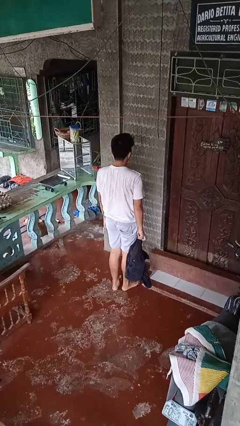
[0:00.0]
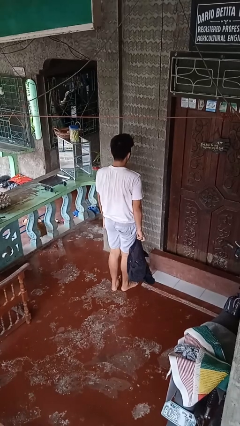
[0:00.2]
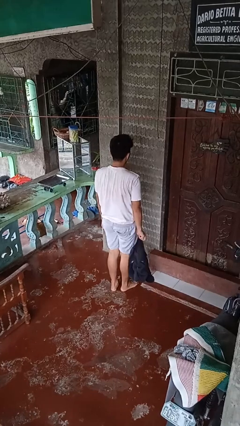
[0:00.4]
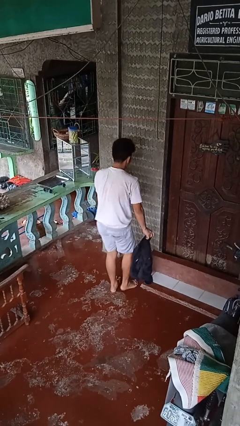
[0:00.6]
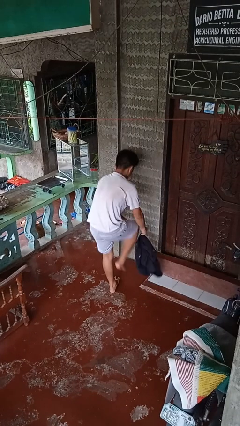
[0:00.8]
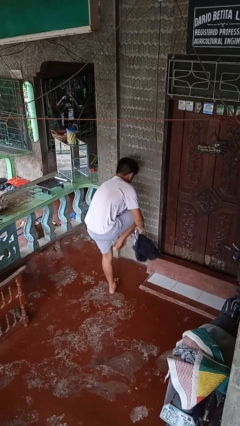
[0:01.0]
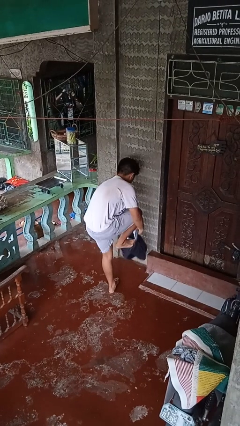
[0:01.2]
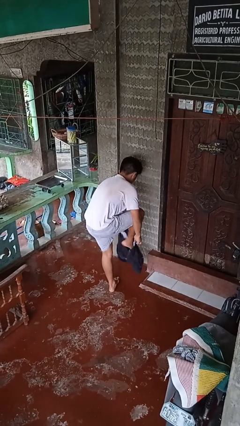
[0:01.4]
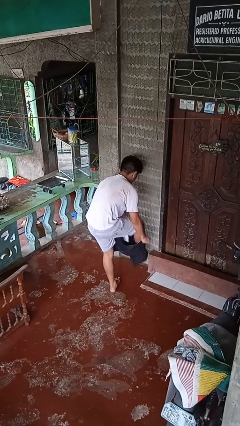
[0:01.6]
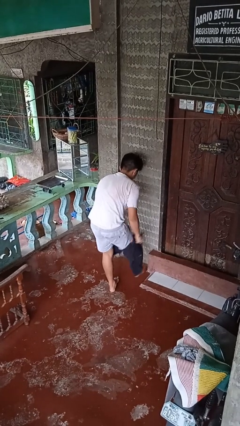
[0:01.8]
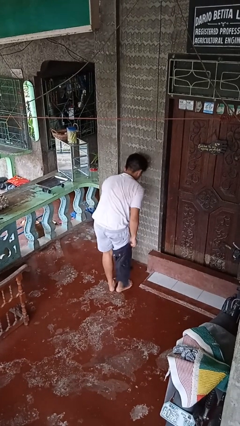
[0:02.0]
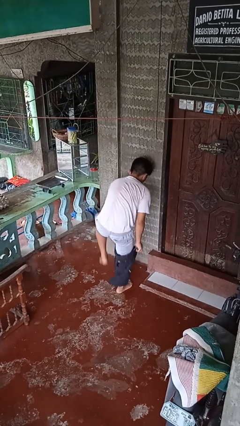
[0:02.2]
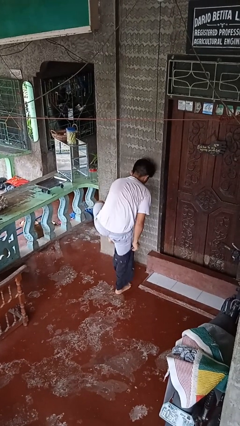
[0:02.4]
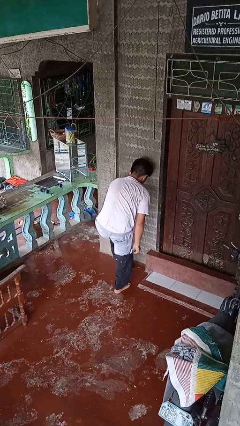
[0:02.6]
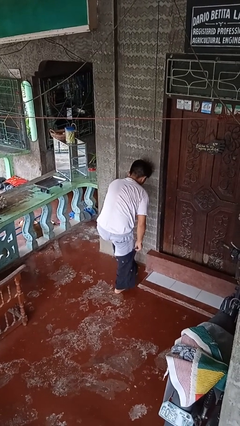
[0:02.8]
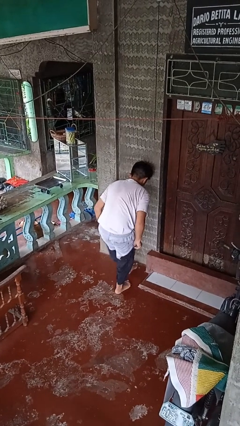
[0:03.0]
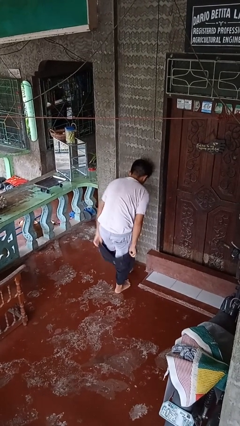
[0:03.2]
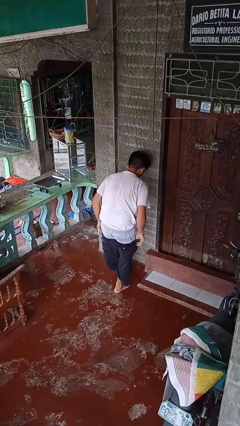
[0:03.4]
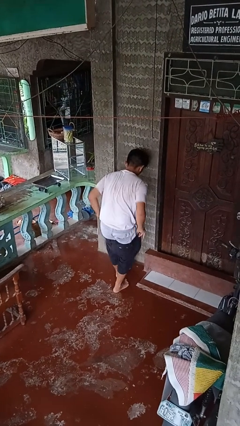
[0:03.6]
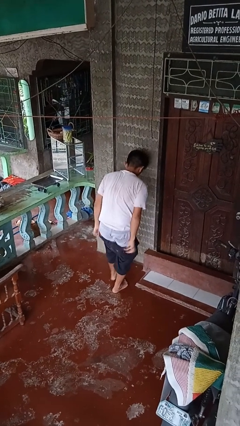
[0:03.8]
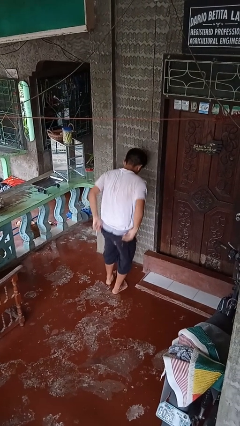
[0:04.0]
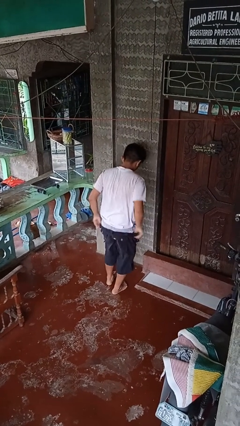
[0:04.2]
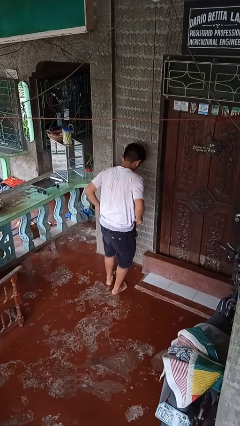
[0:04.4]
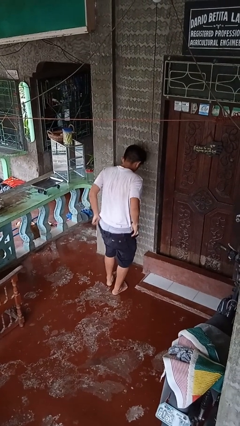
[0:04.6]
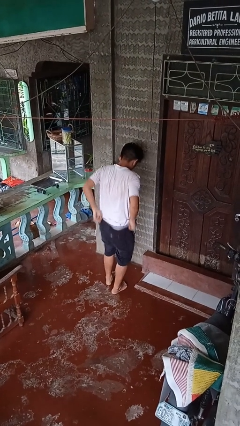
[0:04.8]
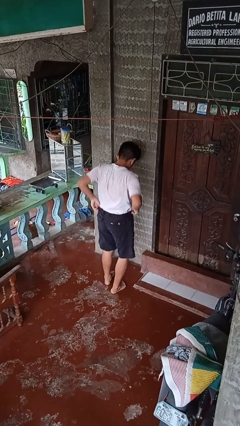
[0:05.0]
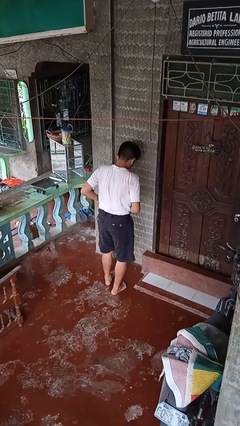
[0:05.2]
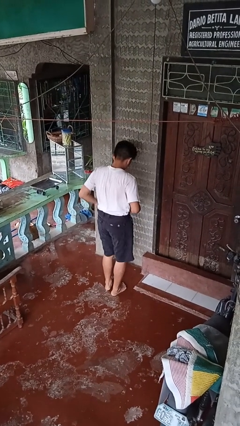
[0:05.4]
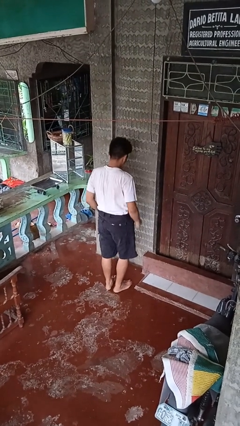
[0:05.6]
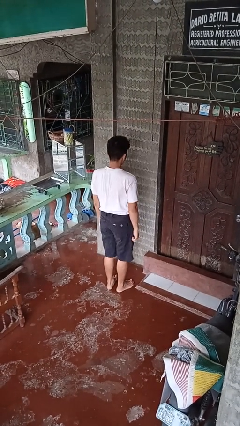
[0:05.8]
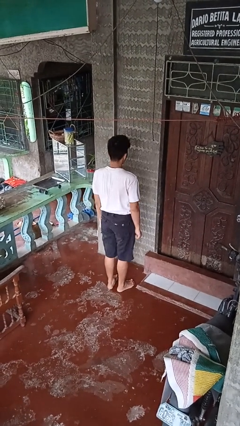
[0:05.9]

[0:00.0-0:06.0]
person puts on pants

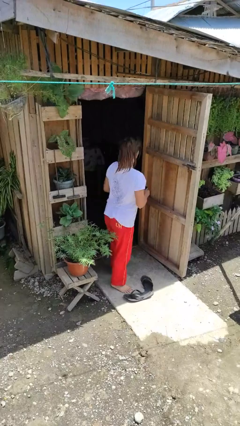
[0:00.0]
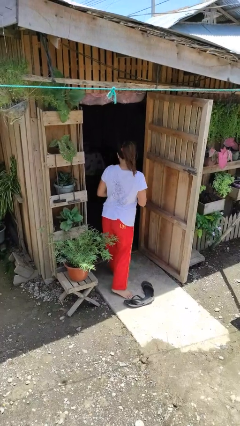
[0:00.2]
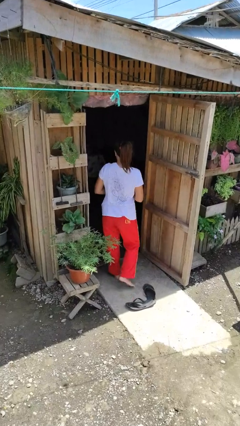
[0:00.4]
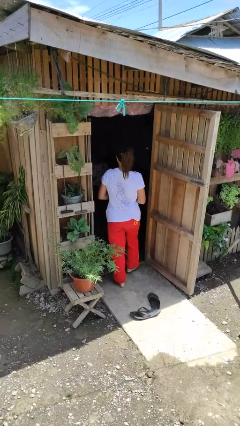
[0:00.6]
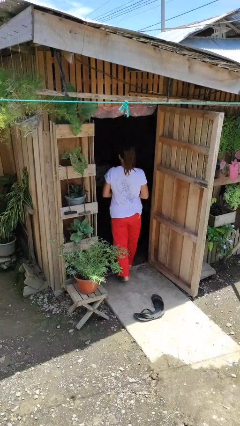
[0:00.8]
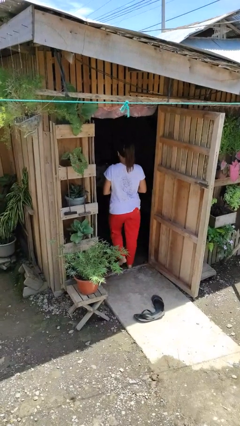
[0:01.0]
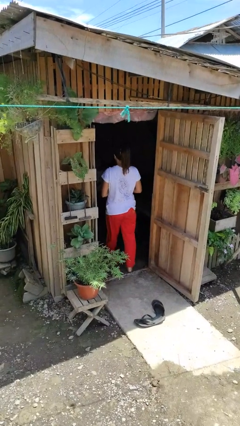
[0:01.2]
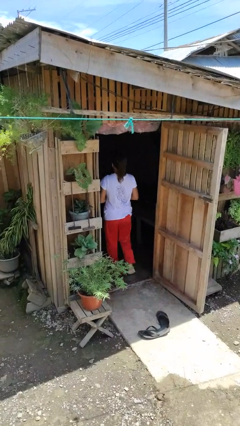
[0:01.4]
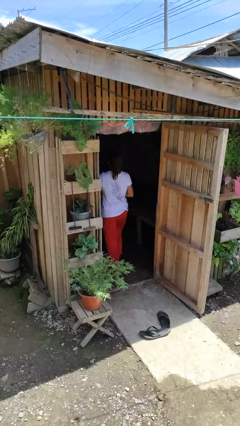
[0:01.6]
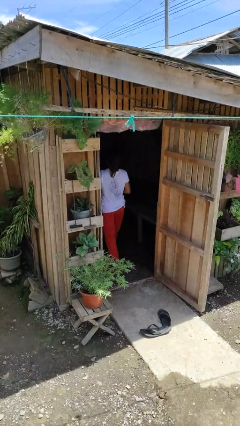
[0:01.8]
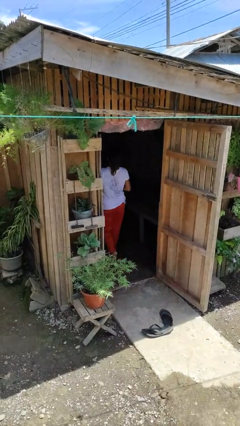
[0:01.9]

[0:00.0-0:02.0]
person exits scene through structure

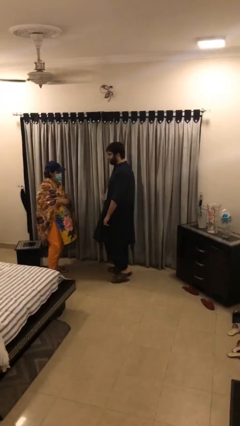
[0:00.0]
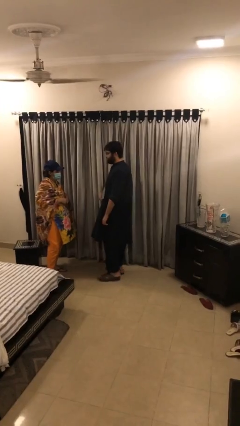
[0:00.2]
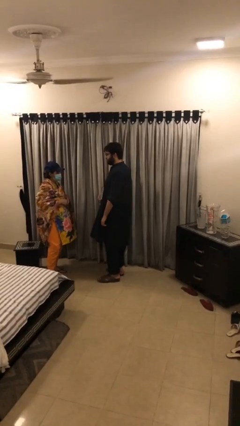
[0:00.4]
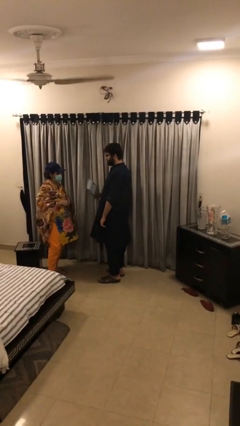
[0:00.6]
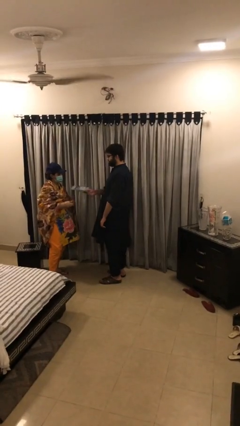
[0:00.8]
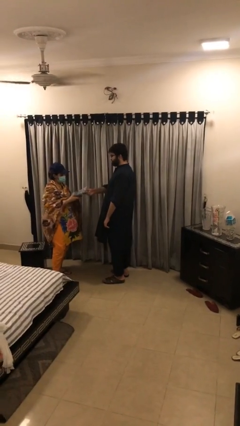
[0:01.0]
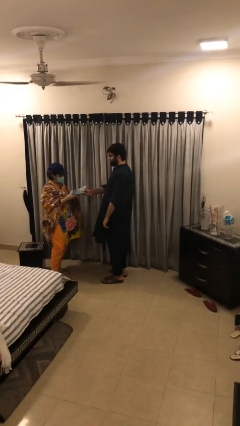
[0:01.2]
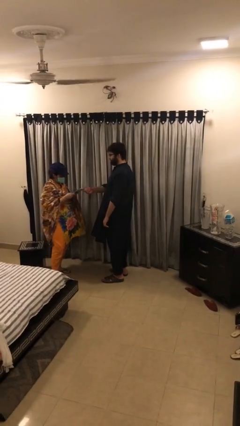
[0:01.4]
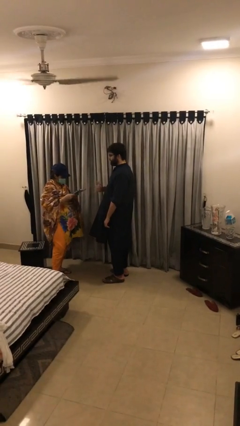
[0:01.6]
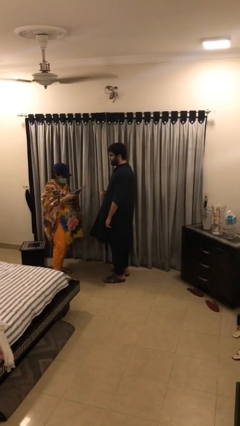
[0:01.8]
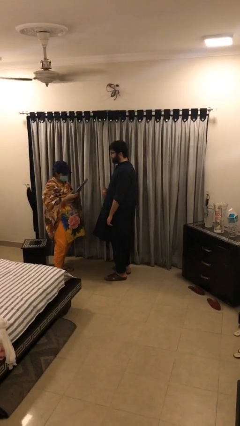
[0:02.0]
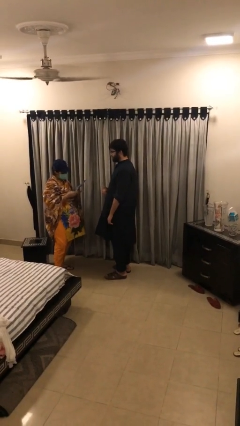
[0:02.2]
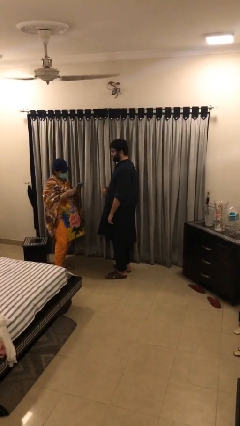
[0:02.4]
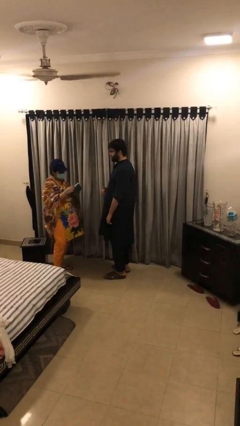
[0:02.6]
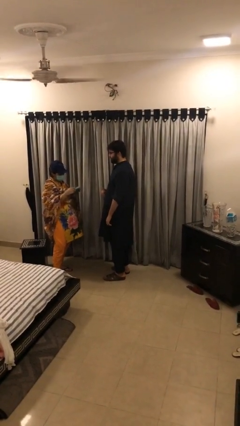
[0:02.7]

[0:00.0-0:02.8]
person transfers object to person

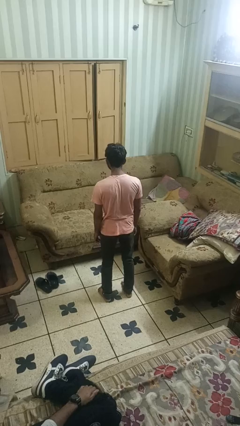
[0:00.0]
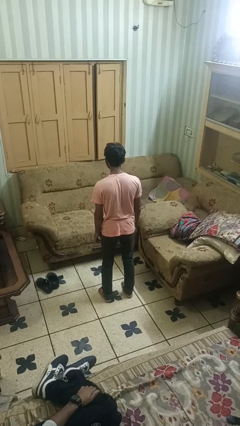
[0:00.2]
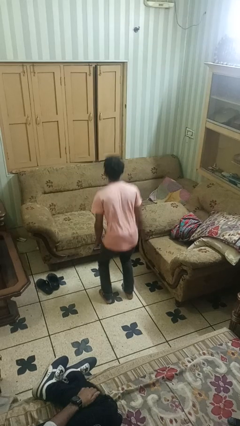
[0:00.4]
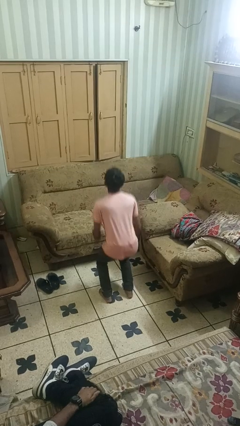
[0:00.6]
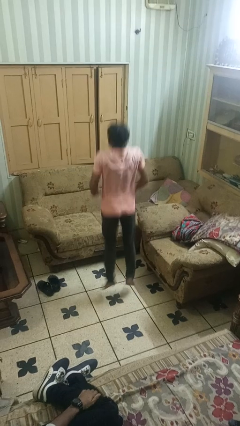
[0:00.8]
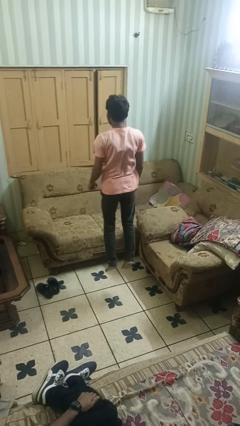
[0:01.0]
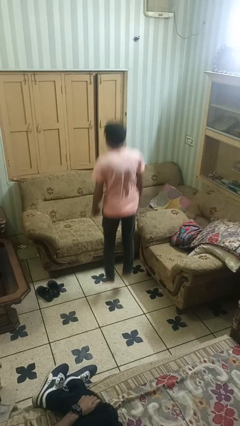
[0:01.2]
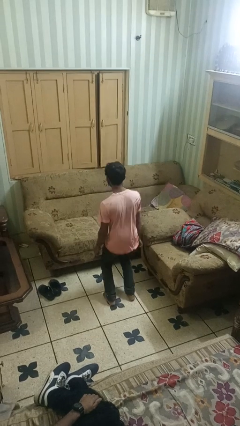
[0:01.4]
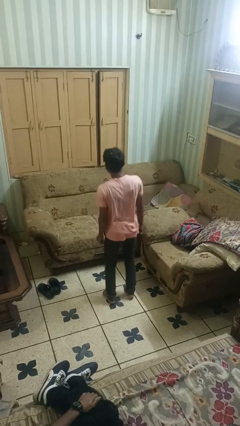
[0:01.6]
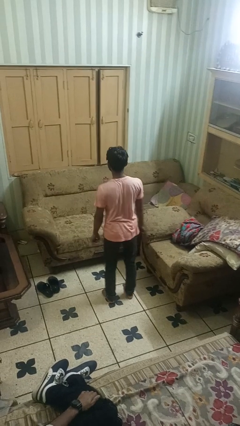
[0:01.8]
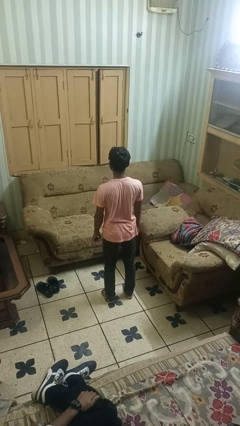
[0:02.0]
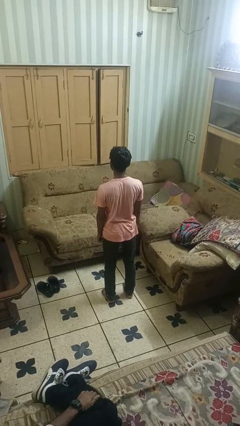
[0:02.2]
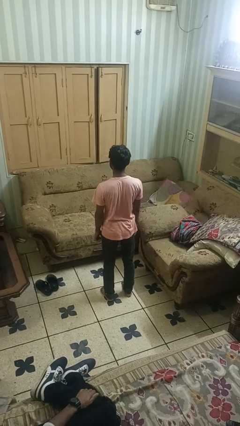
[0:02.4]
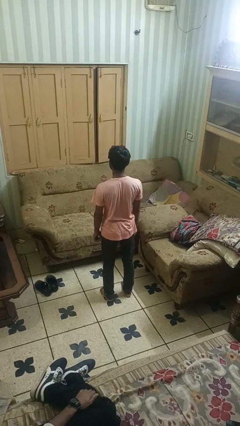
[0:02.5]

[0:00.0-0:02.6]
person jumps

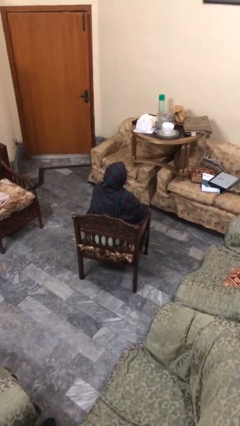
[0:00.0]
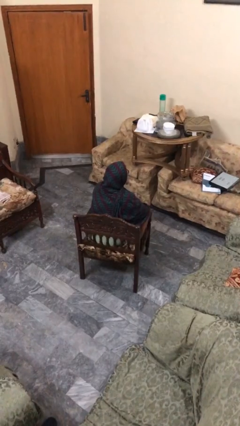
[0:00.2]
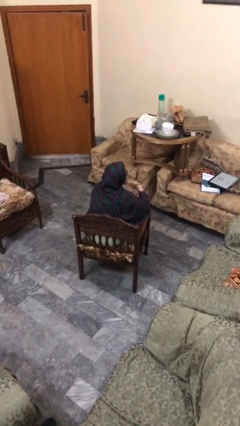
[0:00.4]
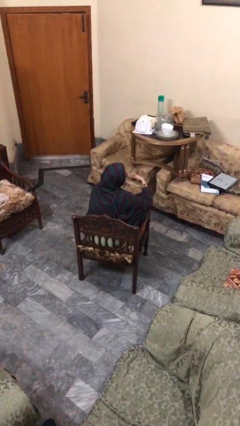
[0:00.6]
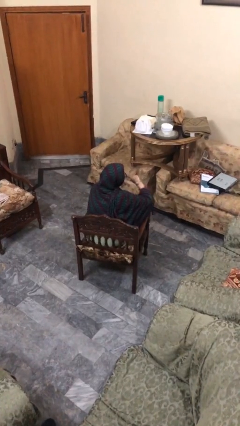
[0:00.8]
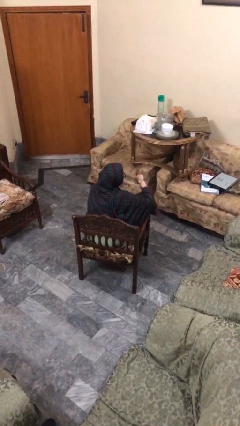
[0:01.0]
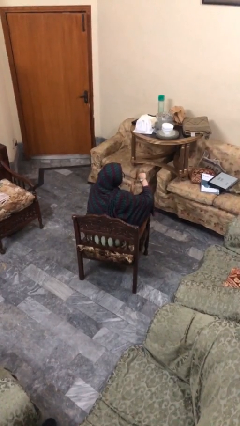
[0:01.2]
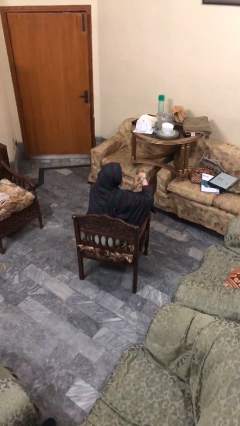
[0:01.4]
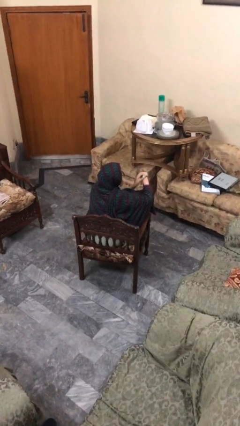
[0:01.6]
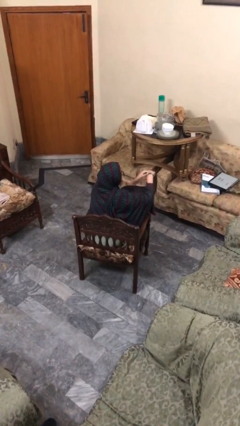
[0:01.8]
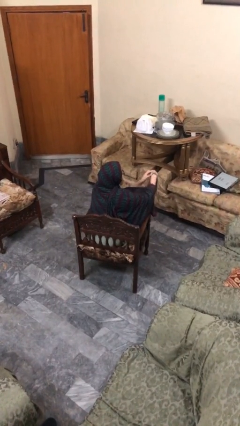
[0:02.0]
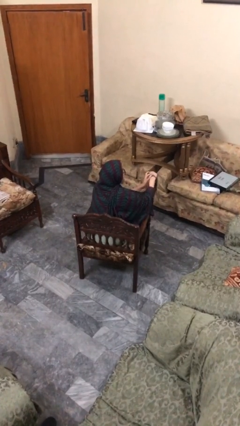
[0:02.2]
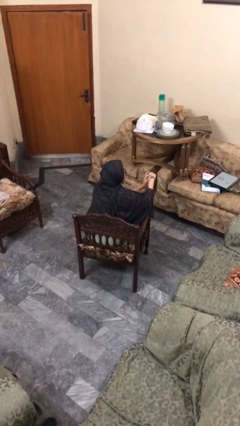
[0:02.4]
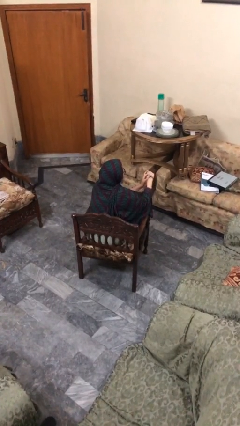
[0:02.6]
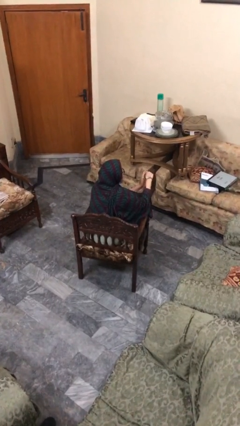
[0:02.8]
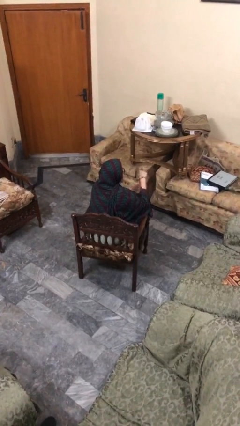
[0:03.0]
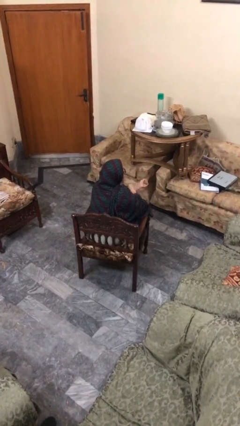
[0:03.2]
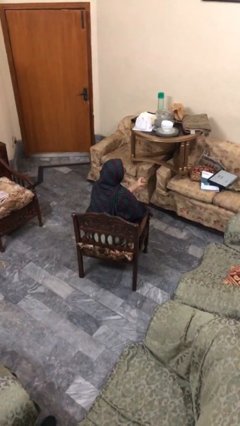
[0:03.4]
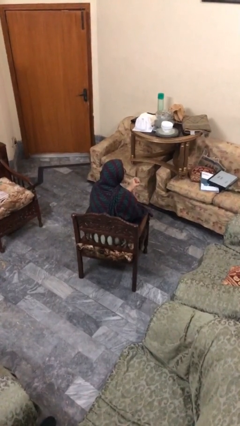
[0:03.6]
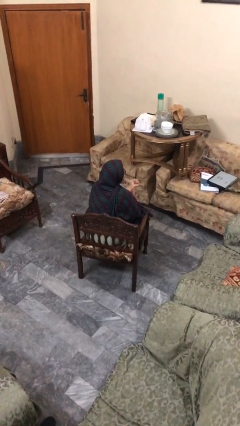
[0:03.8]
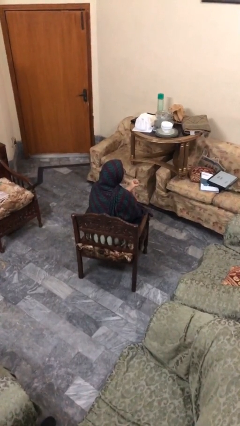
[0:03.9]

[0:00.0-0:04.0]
person looks at wristwatch
